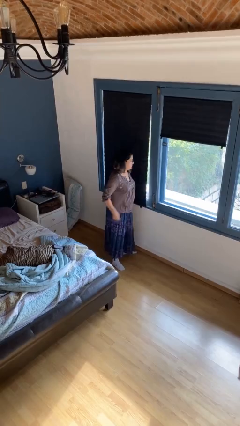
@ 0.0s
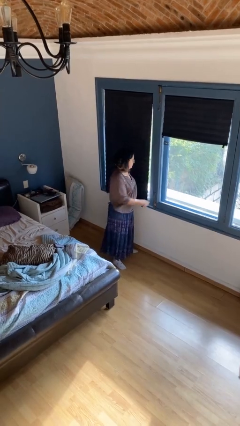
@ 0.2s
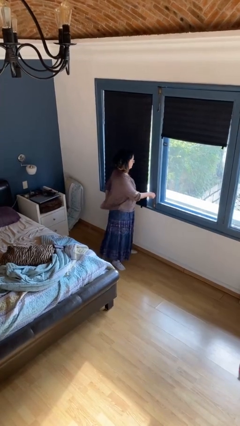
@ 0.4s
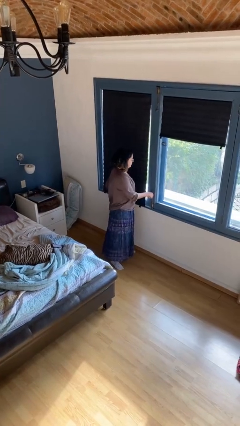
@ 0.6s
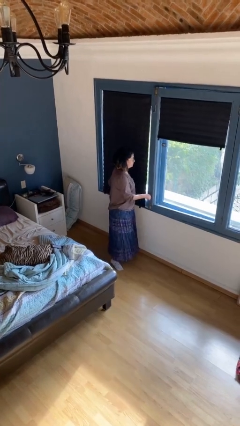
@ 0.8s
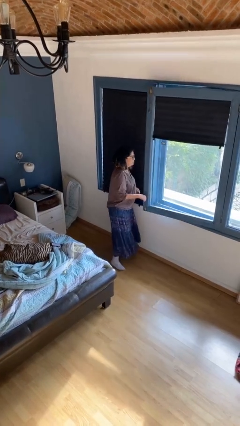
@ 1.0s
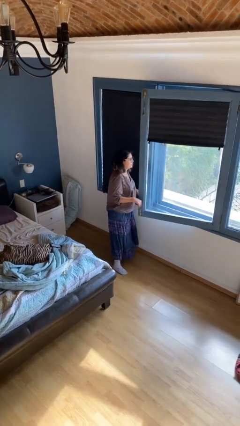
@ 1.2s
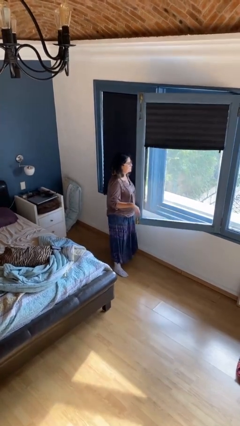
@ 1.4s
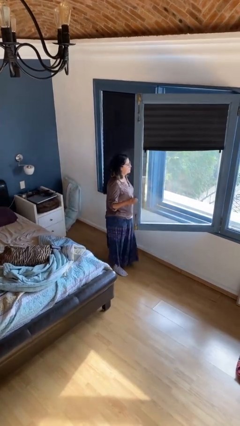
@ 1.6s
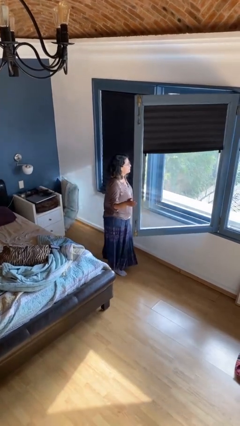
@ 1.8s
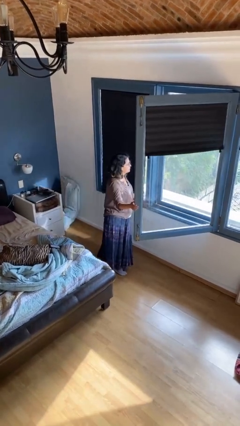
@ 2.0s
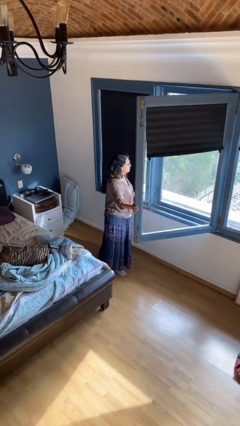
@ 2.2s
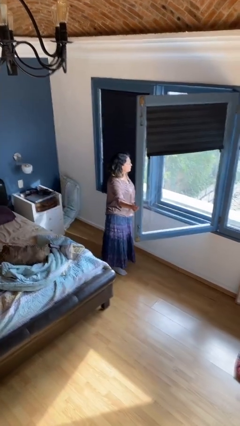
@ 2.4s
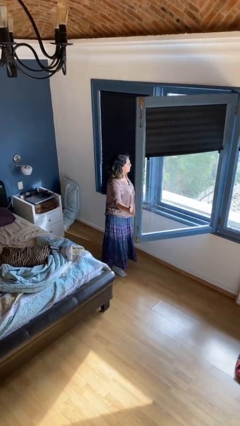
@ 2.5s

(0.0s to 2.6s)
person opens home window

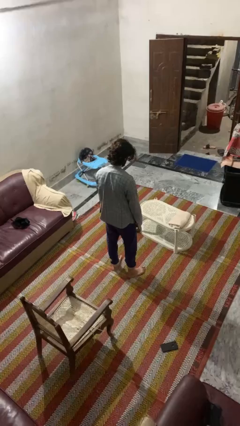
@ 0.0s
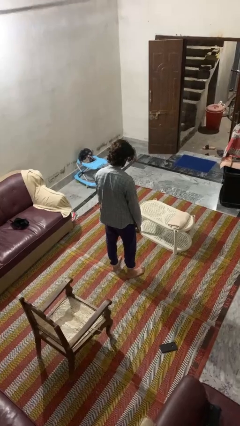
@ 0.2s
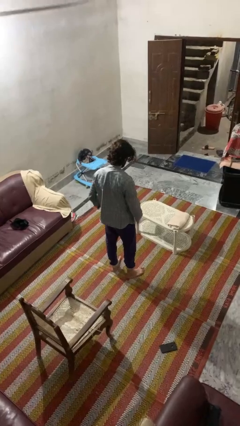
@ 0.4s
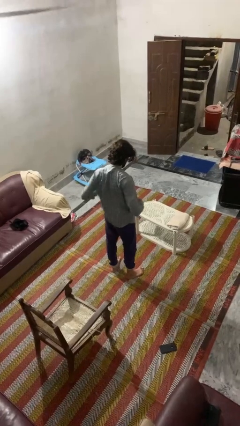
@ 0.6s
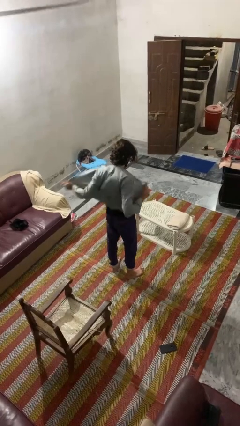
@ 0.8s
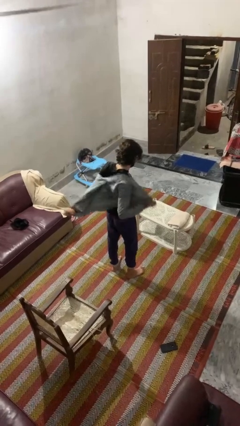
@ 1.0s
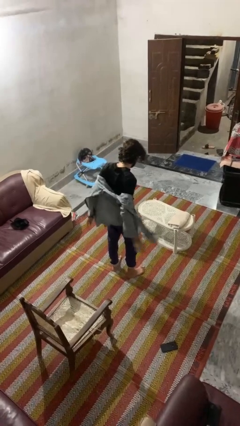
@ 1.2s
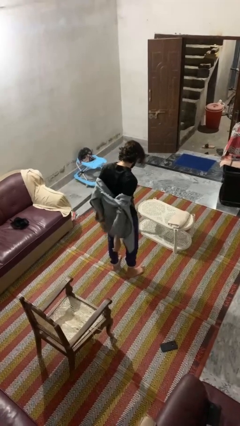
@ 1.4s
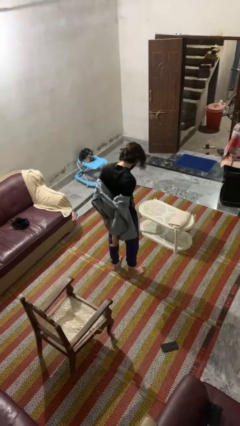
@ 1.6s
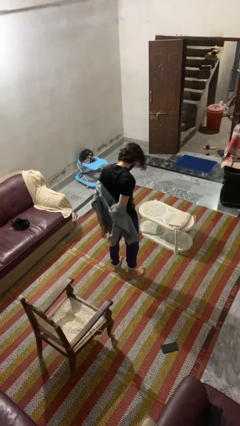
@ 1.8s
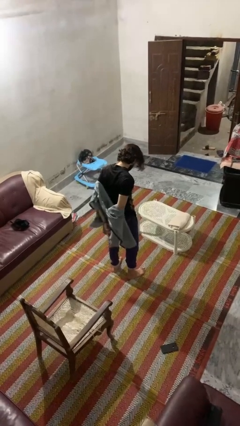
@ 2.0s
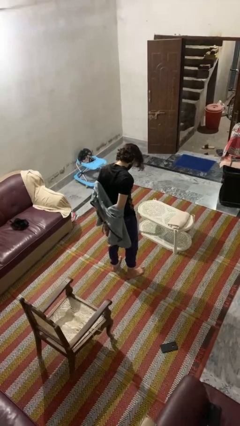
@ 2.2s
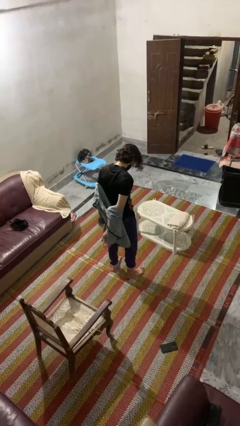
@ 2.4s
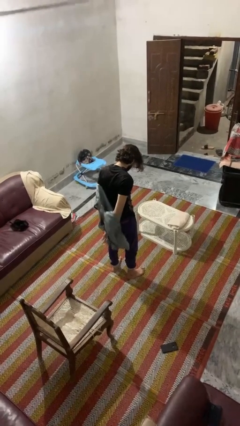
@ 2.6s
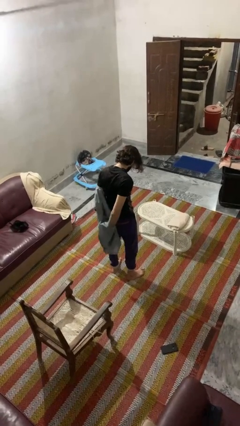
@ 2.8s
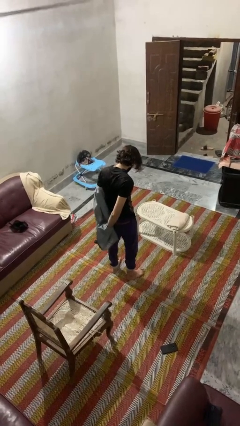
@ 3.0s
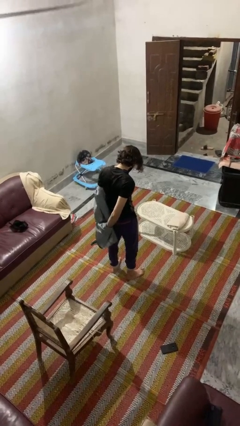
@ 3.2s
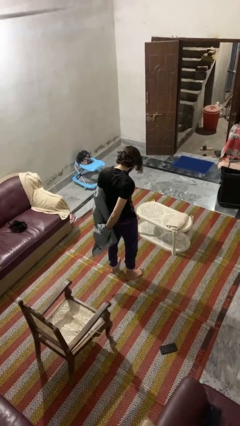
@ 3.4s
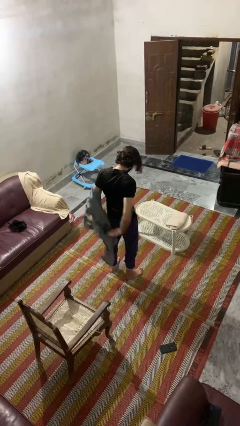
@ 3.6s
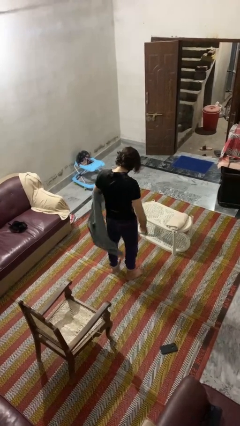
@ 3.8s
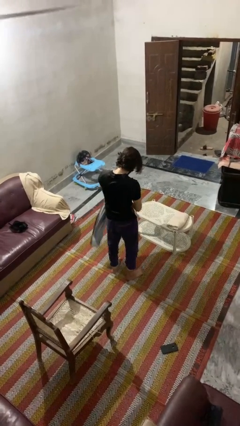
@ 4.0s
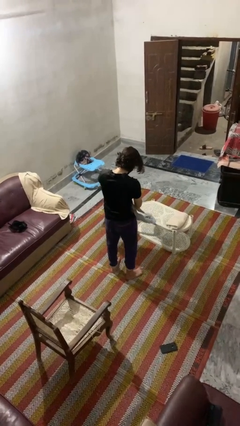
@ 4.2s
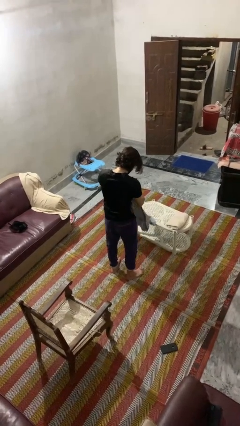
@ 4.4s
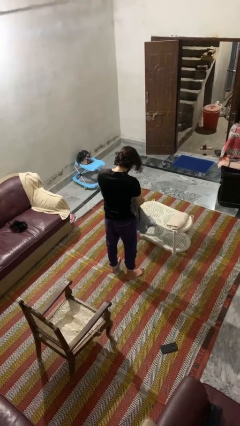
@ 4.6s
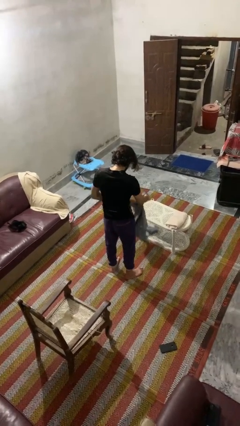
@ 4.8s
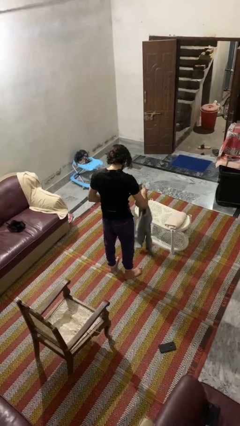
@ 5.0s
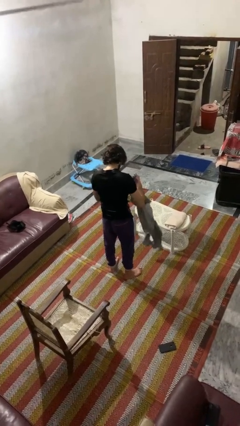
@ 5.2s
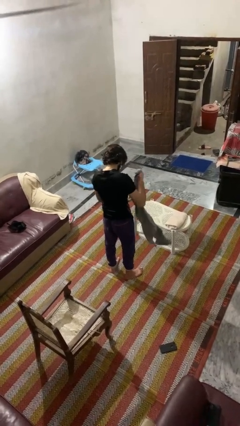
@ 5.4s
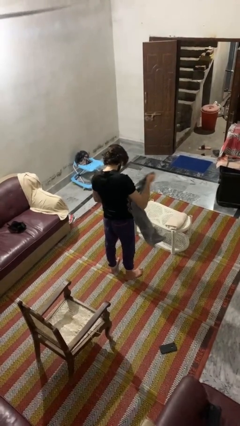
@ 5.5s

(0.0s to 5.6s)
person takes off shirt

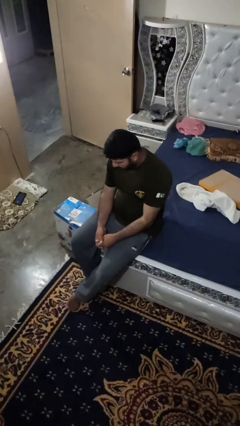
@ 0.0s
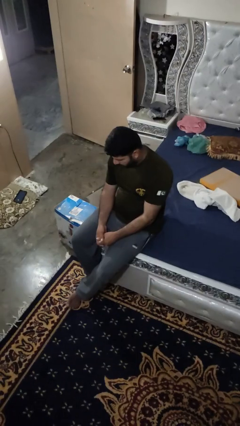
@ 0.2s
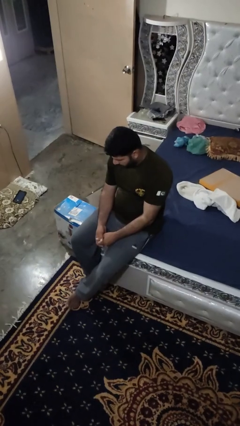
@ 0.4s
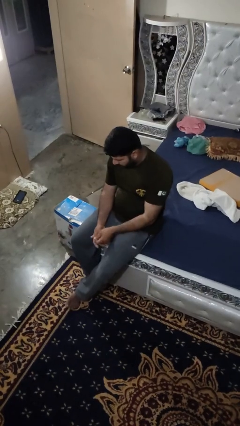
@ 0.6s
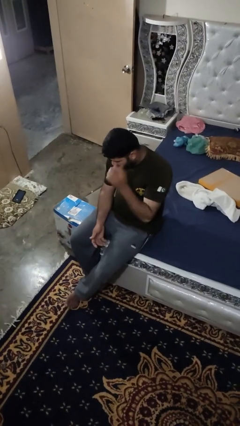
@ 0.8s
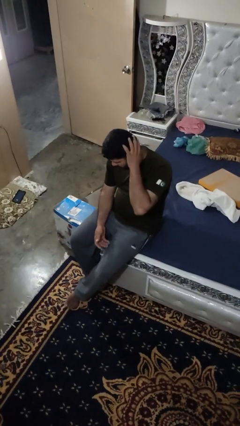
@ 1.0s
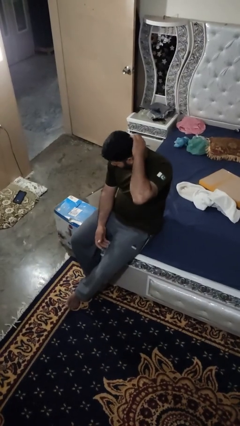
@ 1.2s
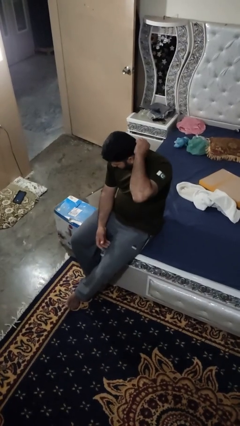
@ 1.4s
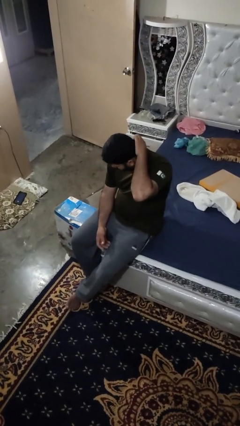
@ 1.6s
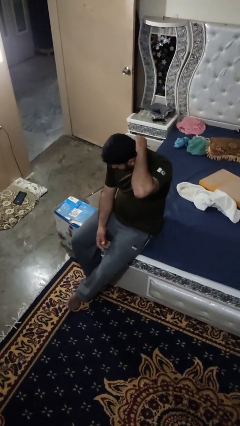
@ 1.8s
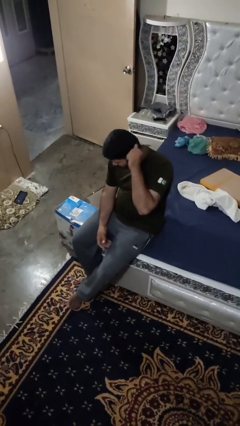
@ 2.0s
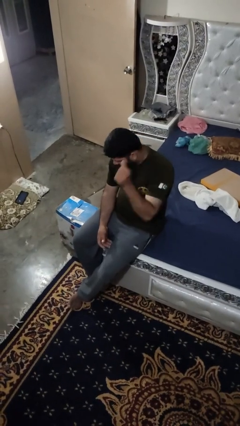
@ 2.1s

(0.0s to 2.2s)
person strokes hair

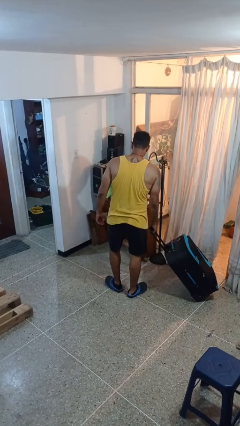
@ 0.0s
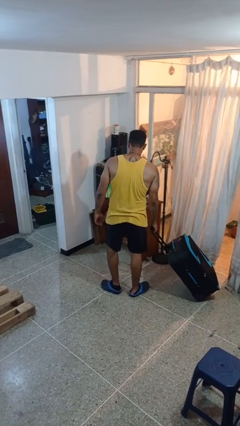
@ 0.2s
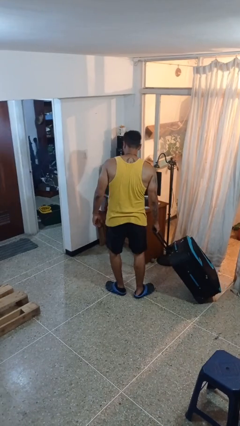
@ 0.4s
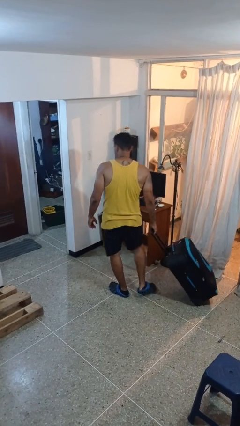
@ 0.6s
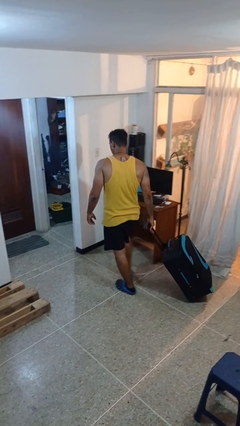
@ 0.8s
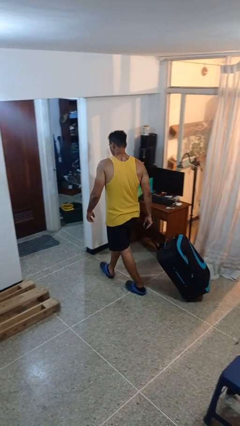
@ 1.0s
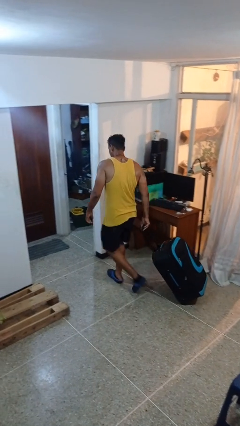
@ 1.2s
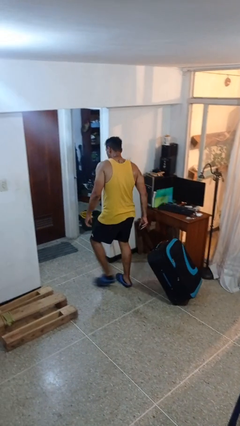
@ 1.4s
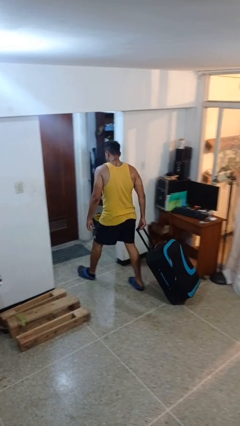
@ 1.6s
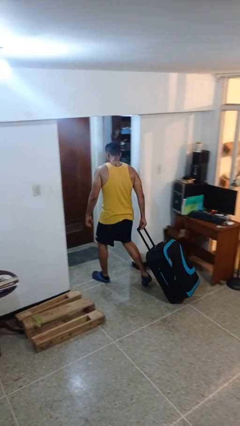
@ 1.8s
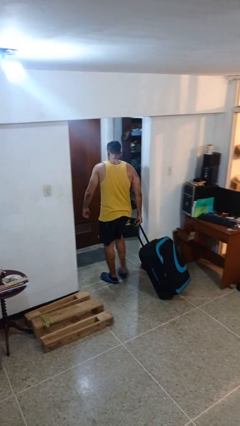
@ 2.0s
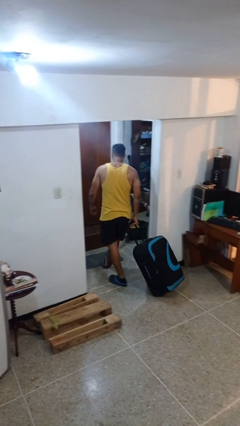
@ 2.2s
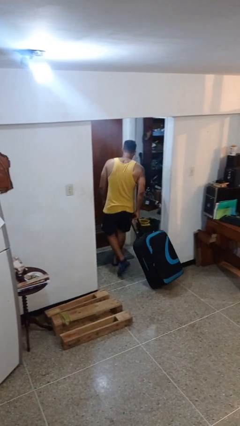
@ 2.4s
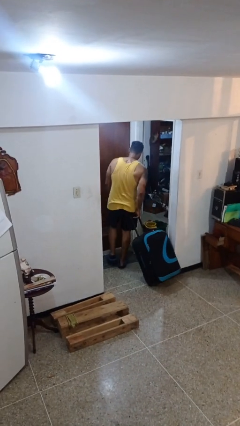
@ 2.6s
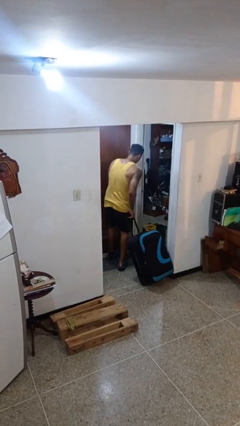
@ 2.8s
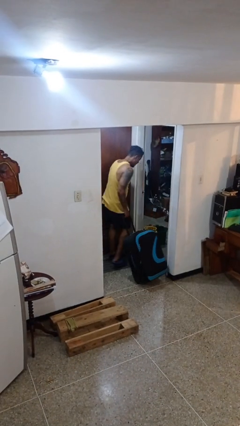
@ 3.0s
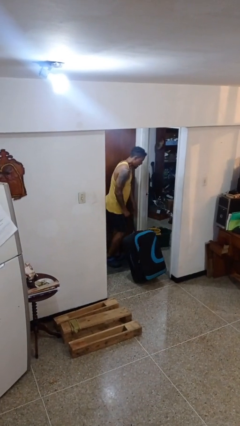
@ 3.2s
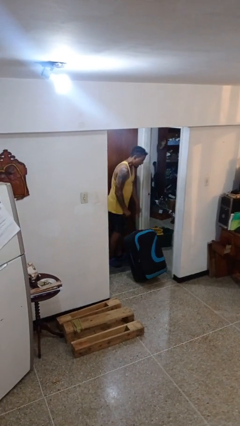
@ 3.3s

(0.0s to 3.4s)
person pulls wheeled cart

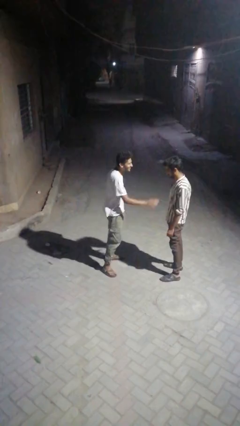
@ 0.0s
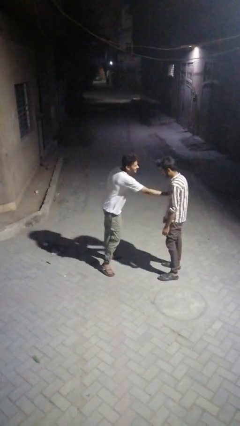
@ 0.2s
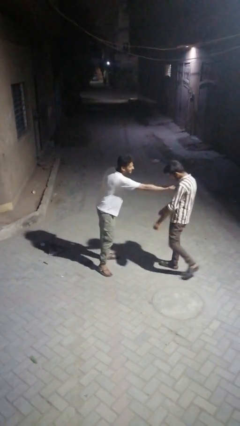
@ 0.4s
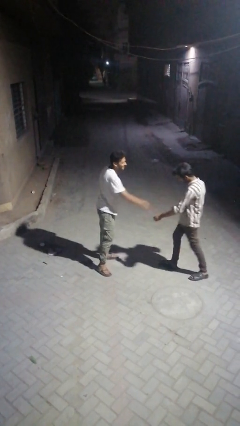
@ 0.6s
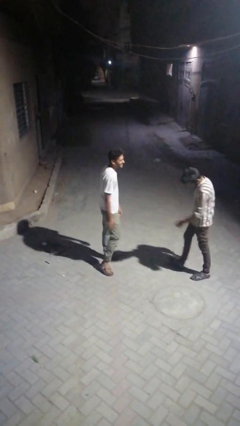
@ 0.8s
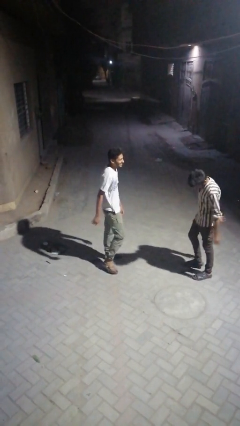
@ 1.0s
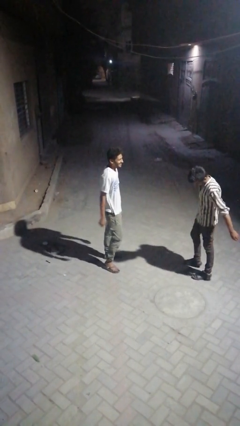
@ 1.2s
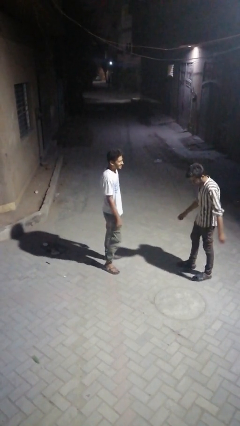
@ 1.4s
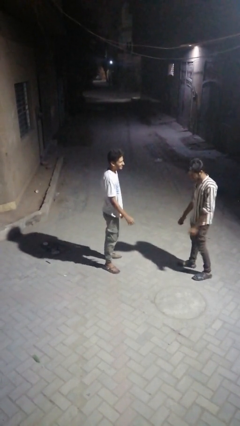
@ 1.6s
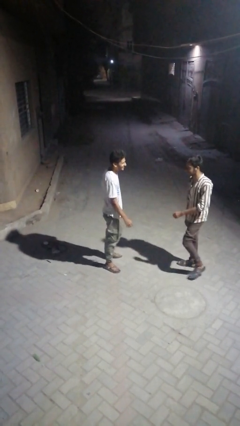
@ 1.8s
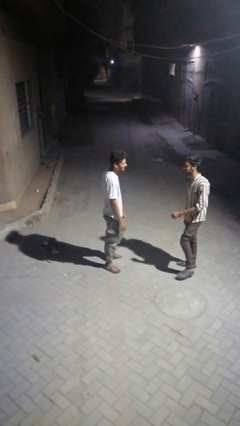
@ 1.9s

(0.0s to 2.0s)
person shoves person

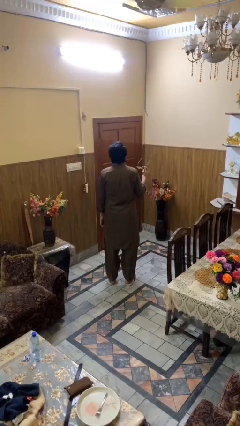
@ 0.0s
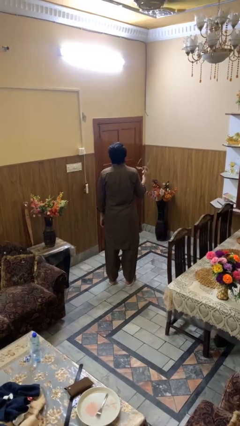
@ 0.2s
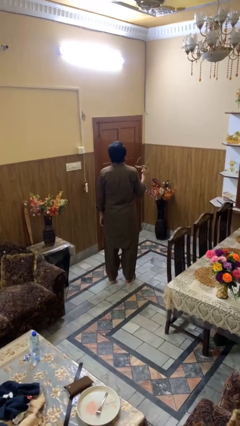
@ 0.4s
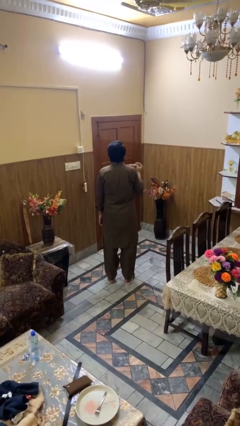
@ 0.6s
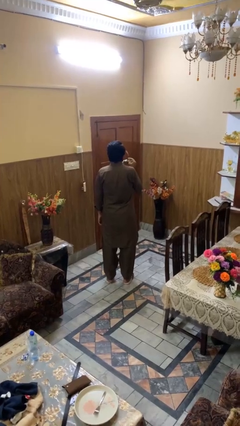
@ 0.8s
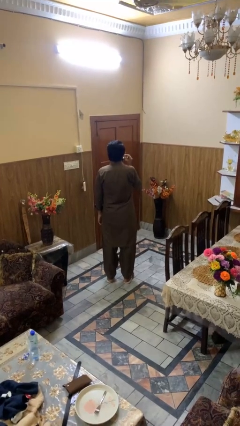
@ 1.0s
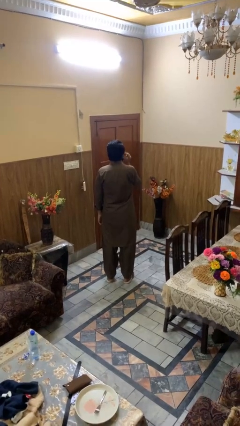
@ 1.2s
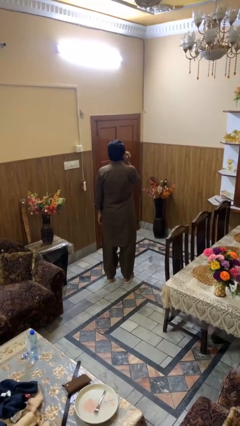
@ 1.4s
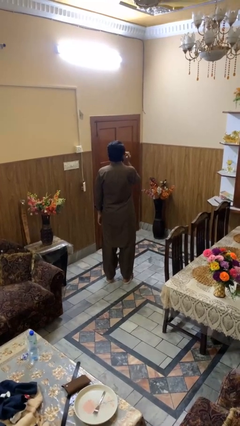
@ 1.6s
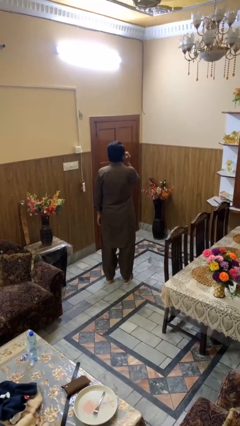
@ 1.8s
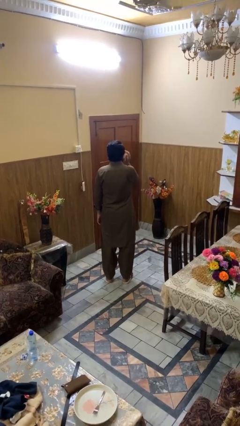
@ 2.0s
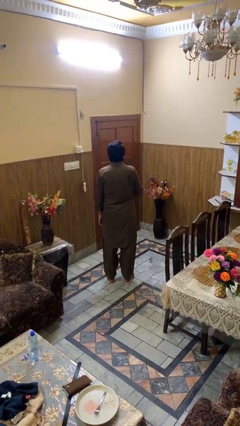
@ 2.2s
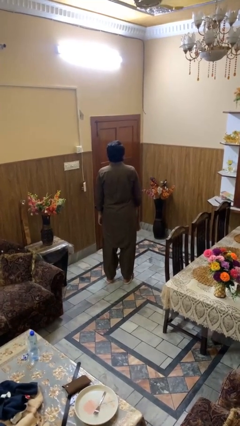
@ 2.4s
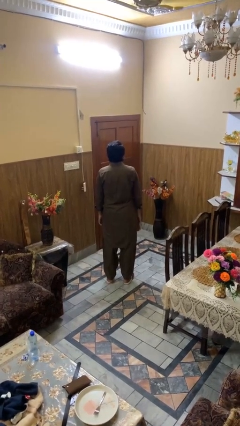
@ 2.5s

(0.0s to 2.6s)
person puts on sunglasses
